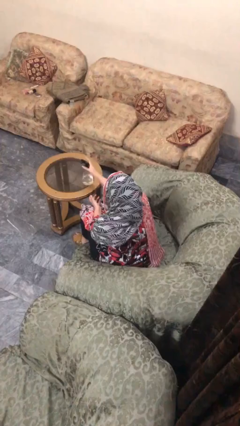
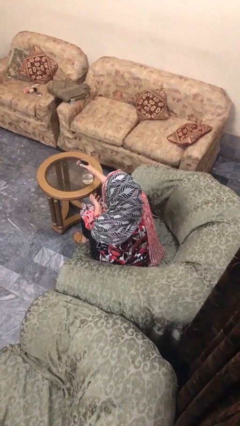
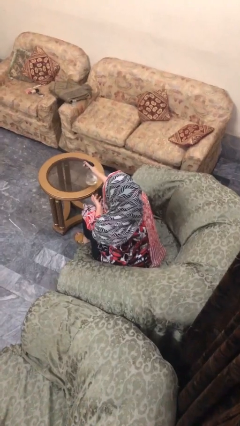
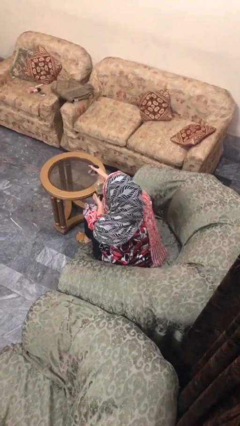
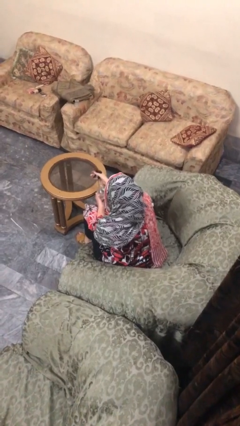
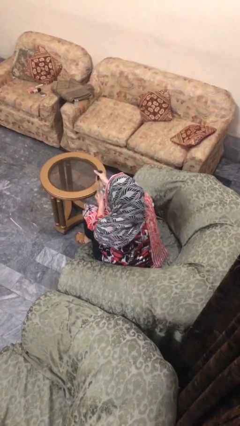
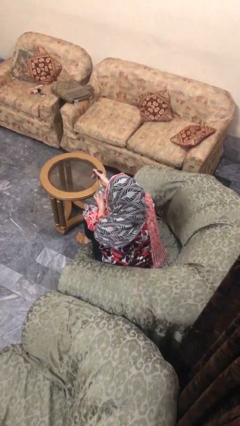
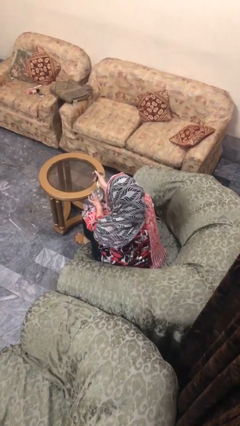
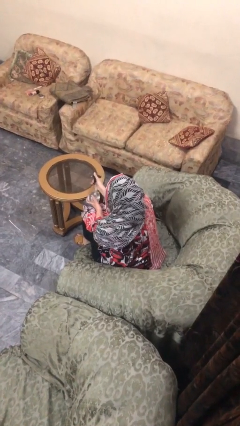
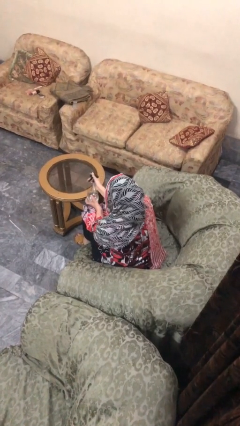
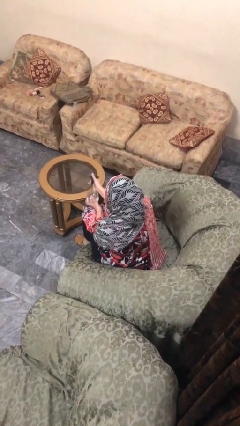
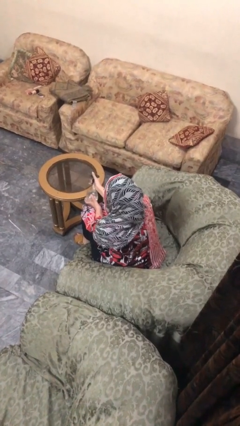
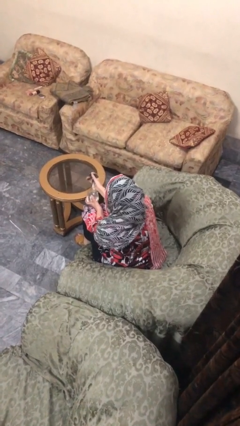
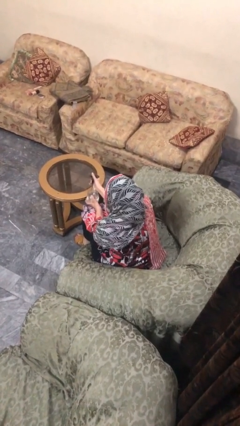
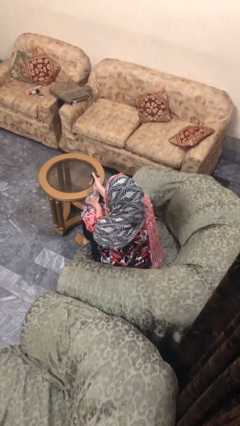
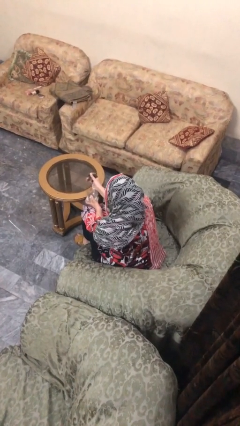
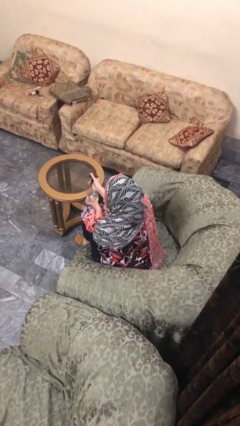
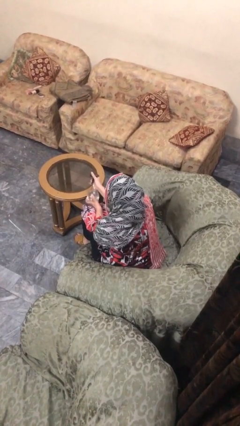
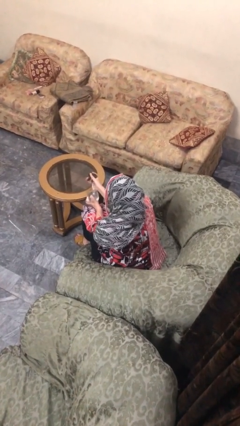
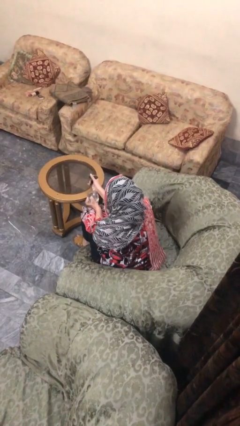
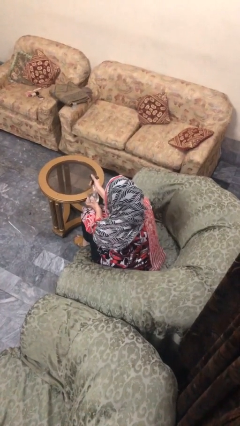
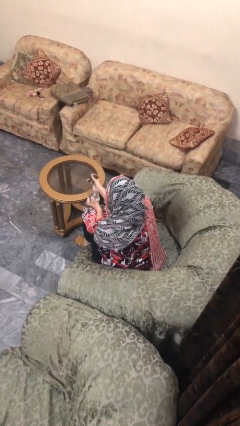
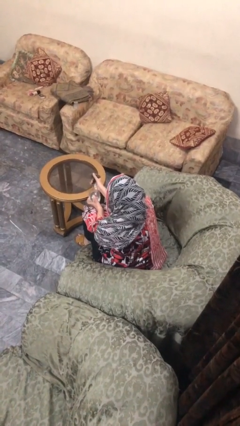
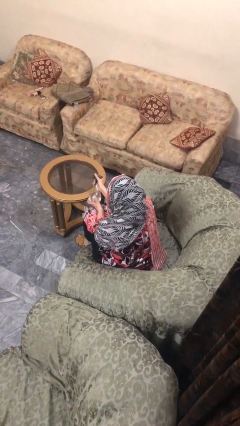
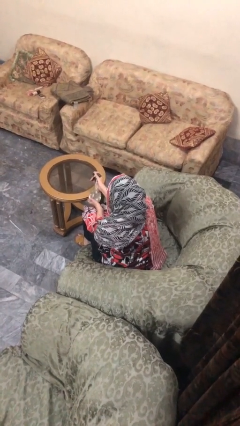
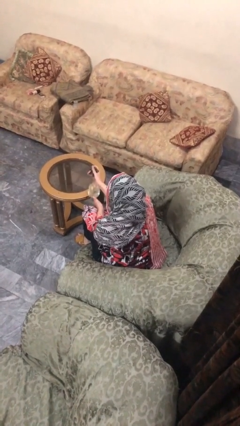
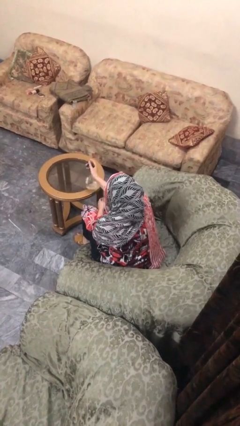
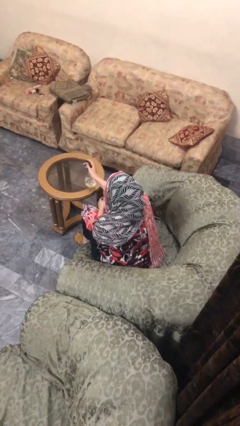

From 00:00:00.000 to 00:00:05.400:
person sprays from bottle

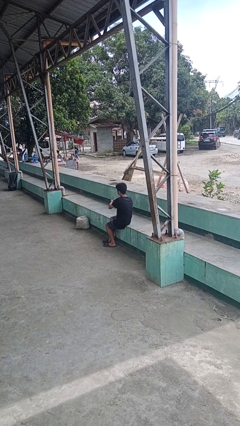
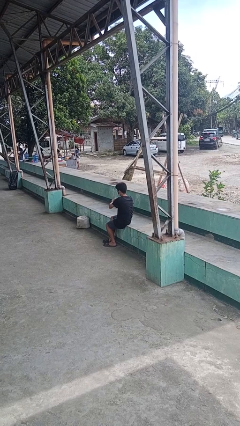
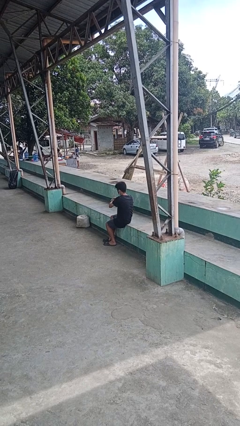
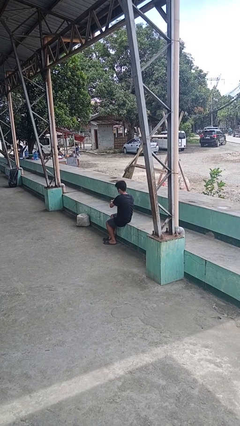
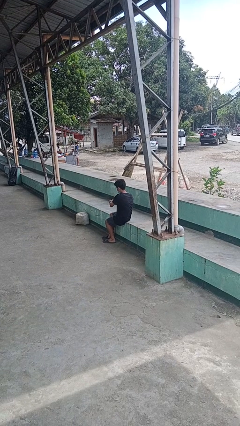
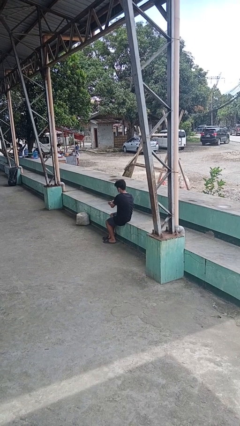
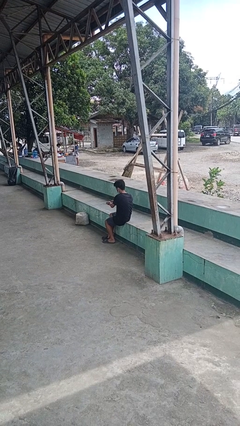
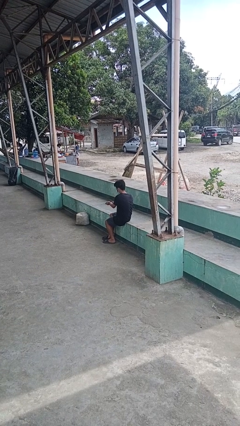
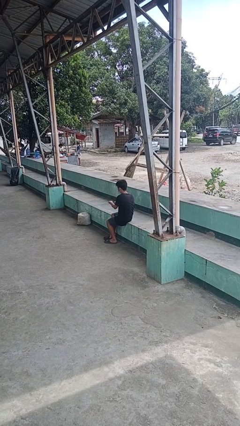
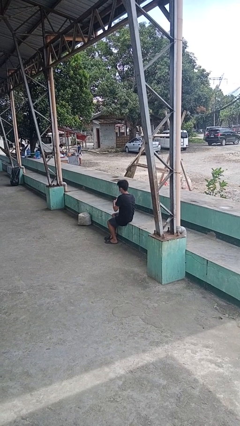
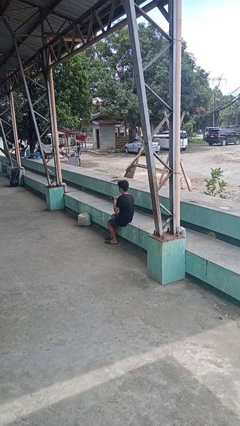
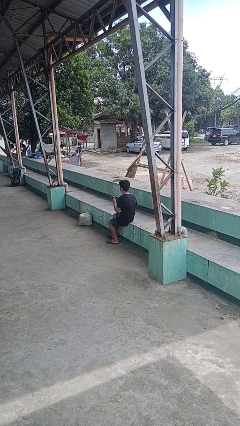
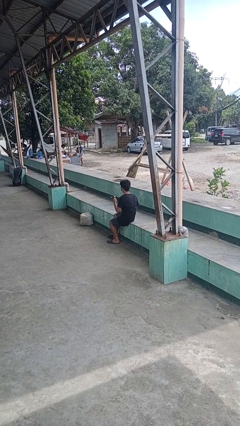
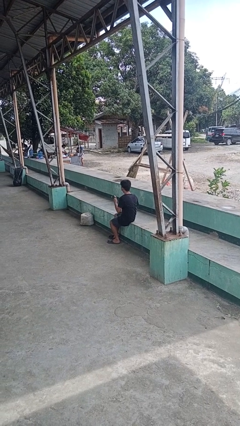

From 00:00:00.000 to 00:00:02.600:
person takes off wristwatch

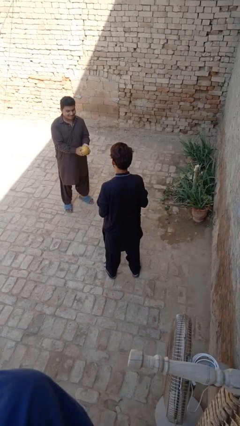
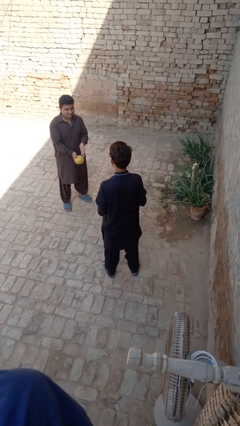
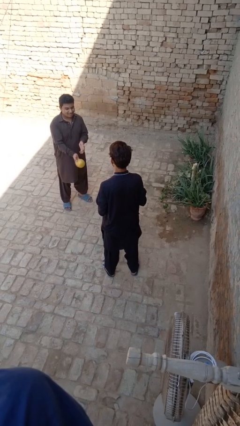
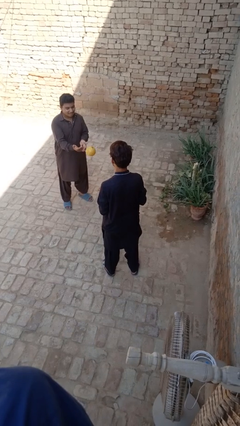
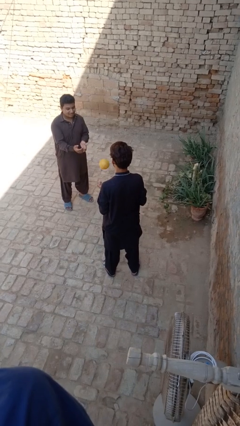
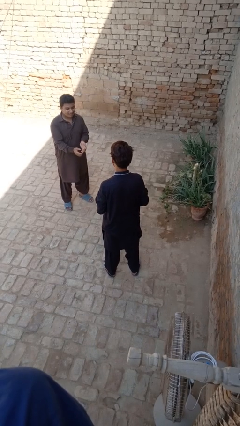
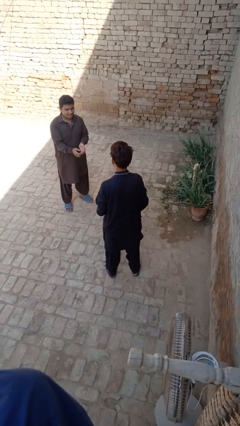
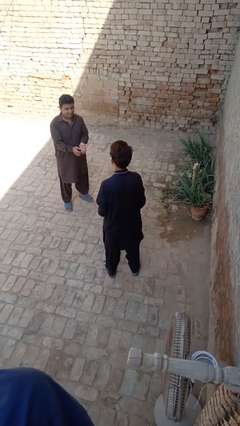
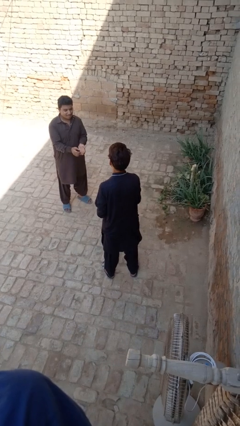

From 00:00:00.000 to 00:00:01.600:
person catches object from person

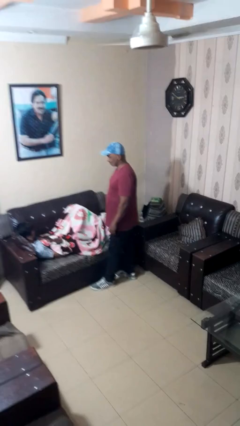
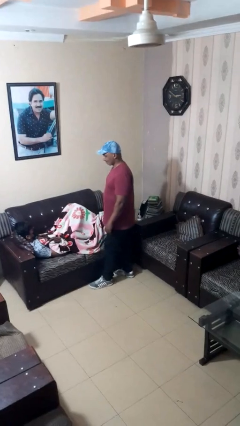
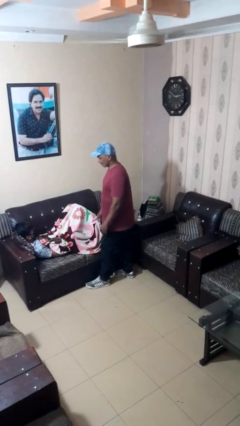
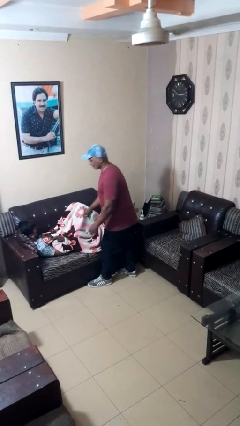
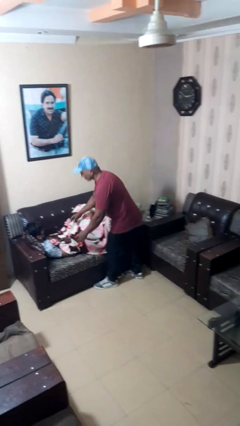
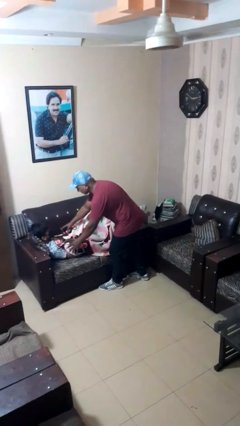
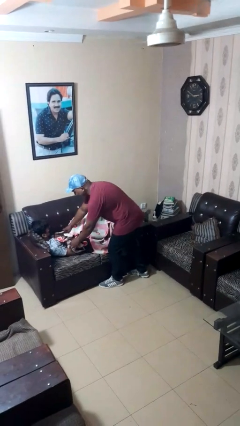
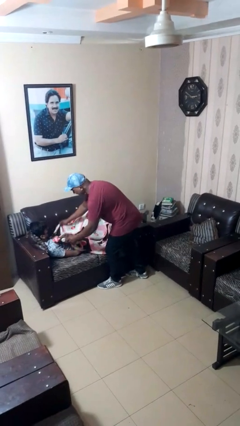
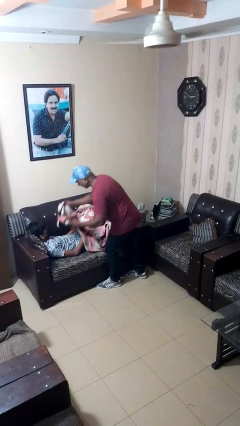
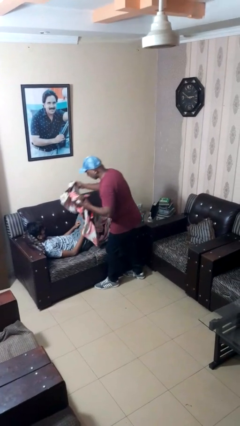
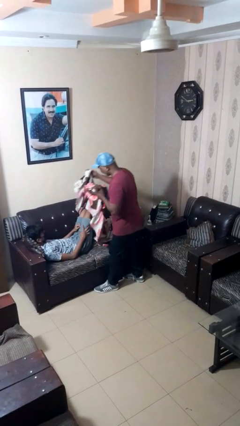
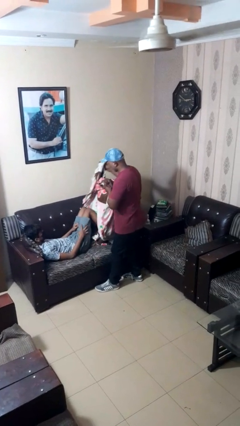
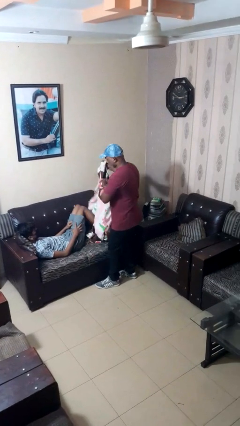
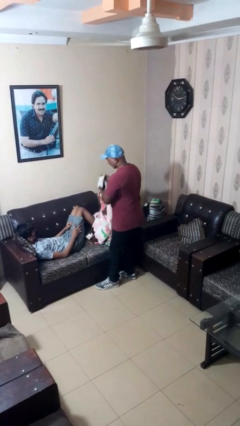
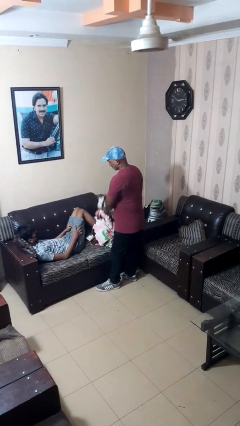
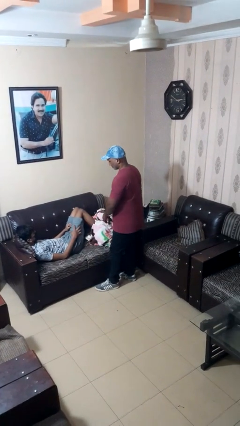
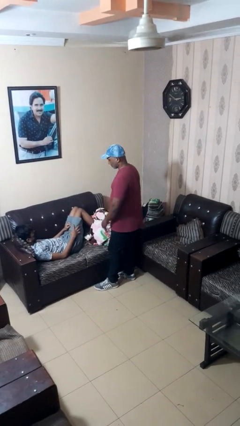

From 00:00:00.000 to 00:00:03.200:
person uncovers friend with blanket

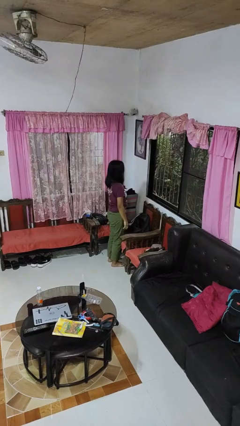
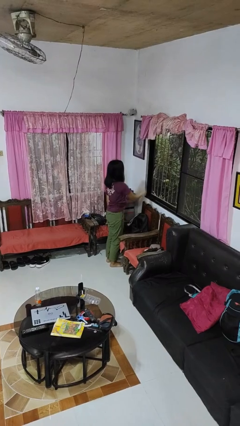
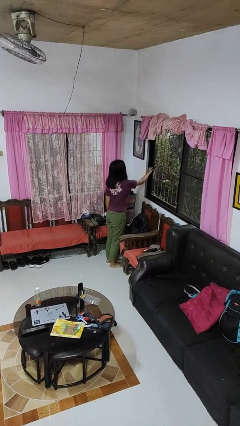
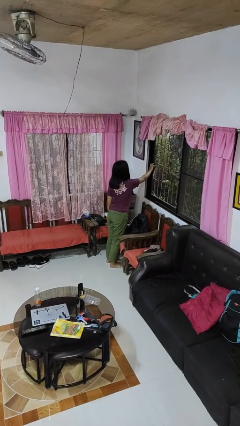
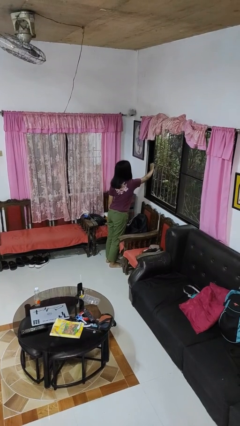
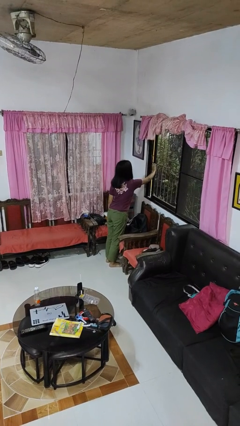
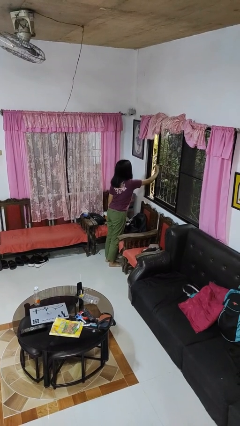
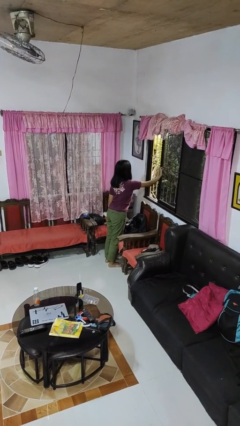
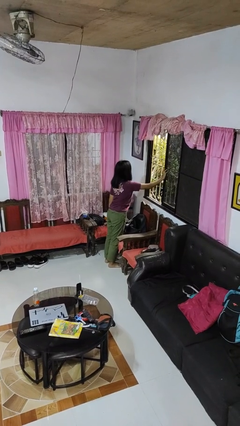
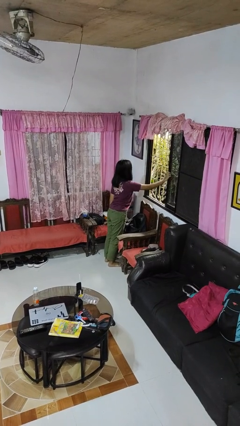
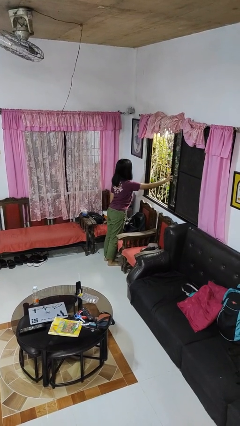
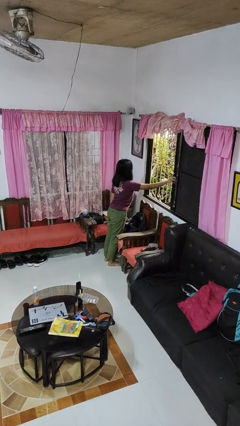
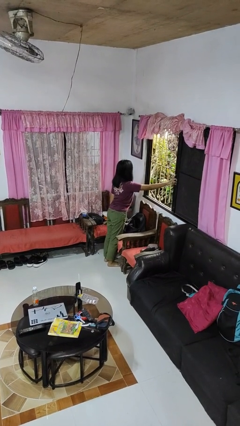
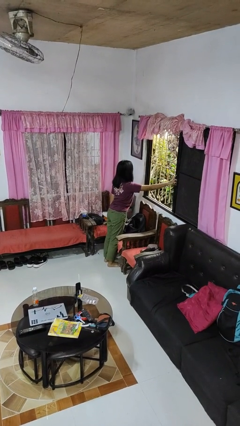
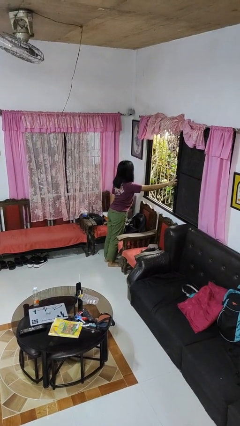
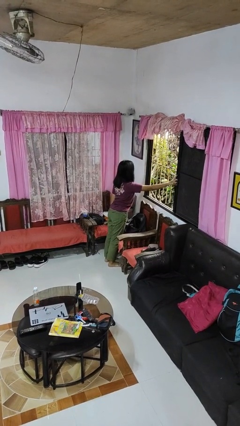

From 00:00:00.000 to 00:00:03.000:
person opens home window

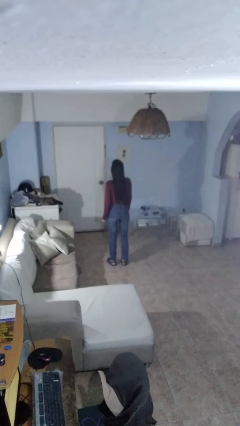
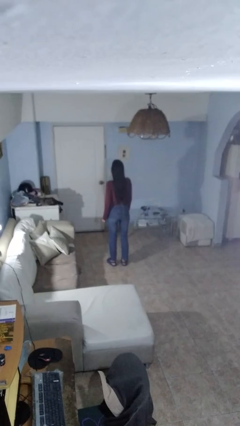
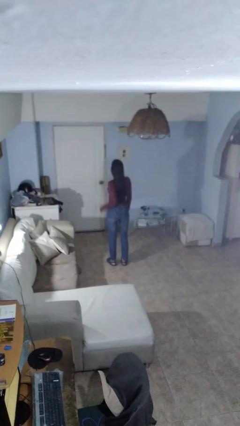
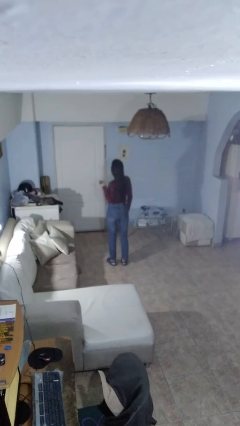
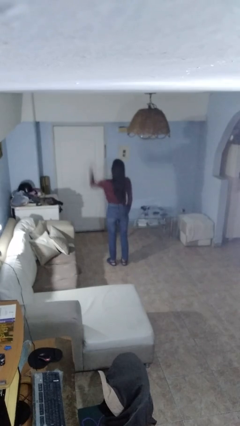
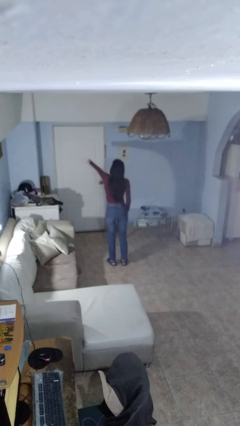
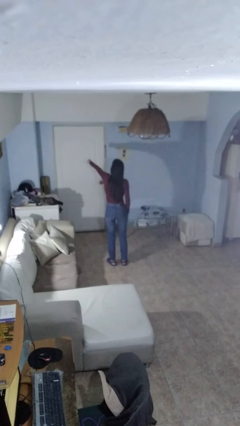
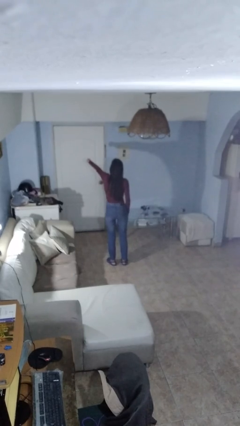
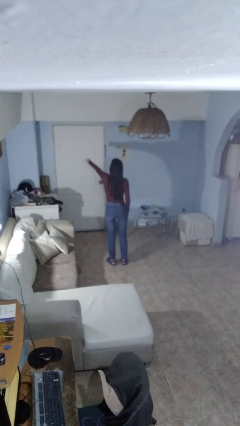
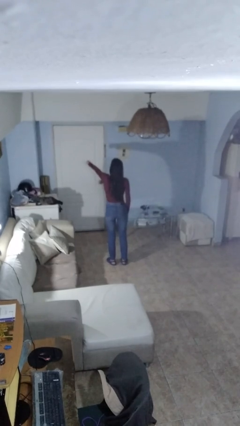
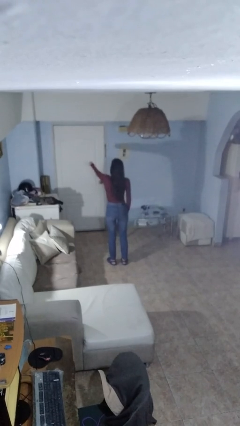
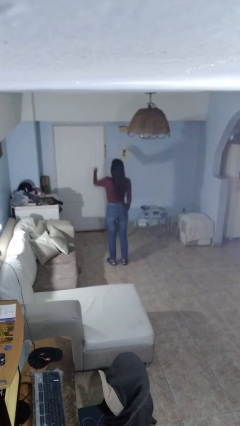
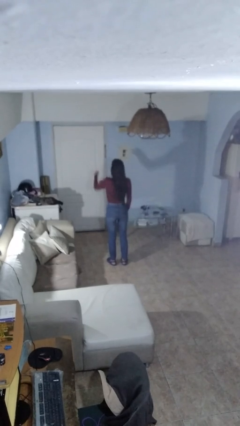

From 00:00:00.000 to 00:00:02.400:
person punches
